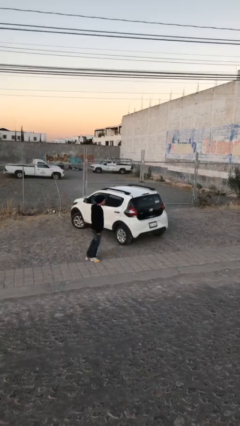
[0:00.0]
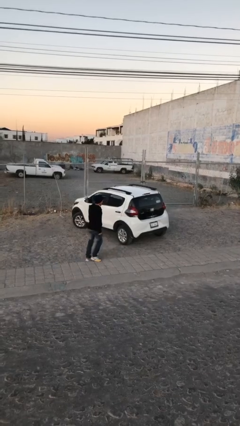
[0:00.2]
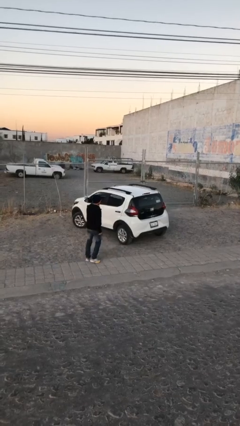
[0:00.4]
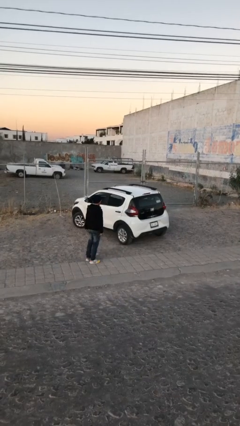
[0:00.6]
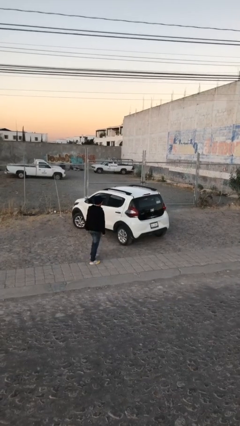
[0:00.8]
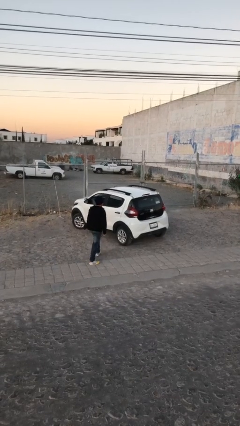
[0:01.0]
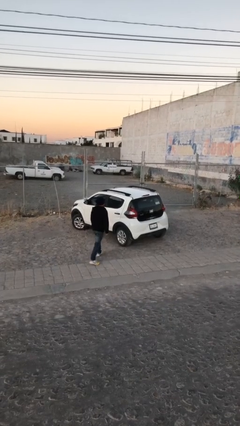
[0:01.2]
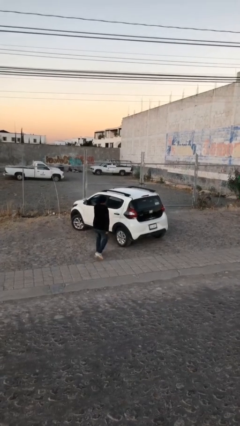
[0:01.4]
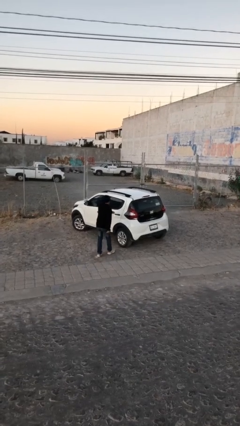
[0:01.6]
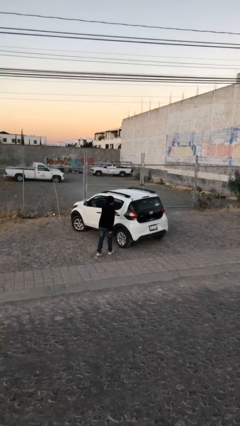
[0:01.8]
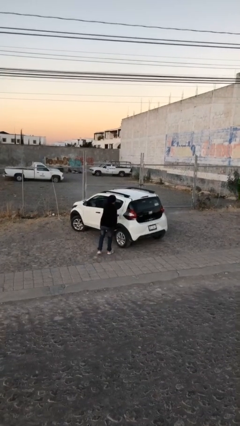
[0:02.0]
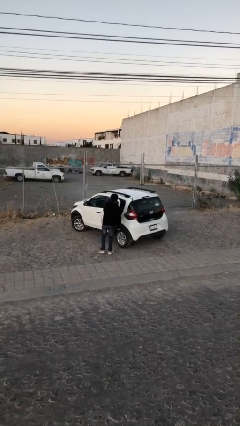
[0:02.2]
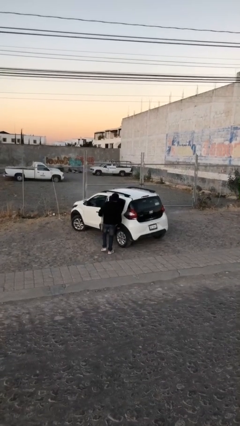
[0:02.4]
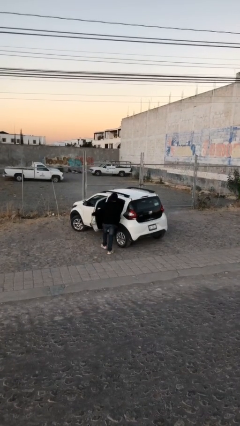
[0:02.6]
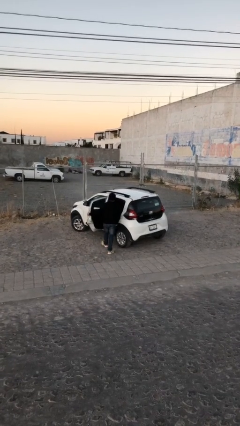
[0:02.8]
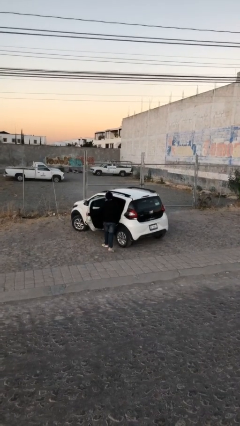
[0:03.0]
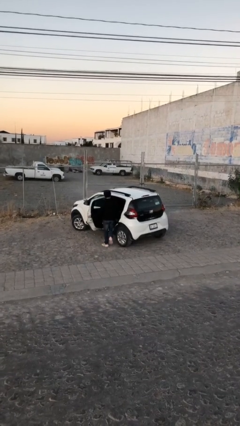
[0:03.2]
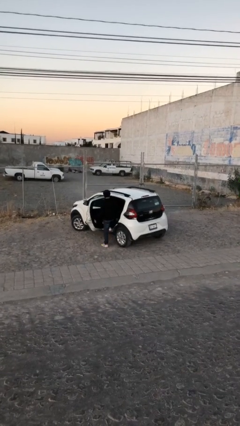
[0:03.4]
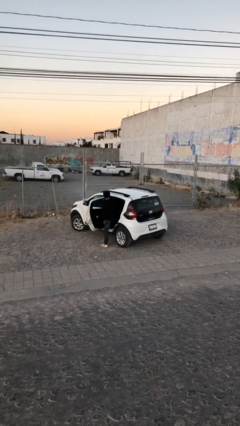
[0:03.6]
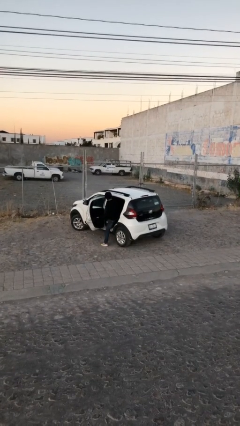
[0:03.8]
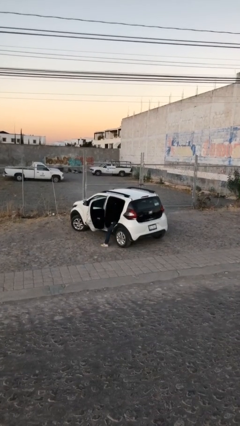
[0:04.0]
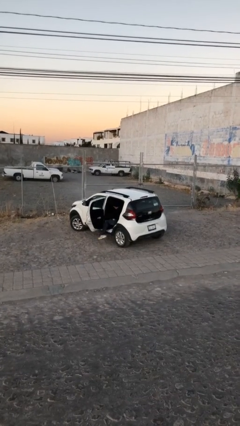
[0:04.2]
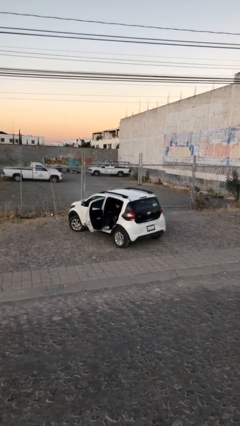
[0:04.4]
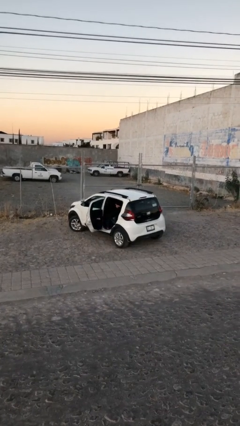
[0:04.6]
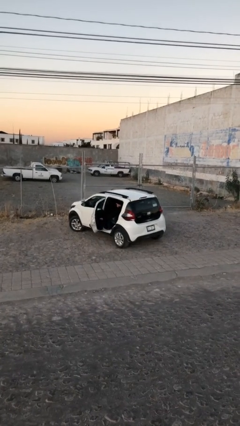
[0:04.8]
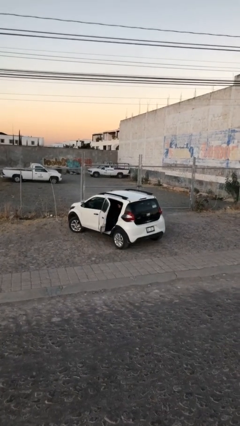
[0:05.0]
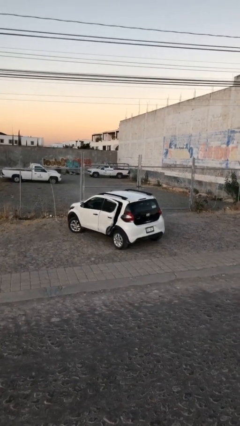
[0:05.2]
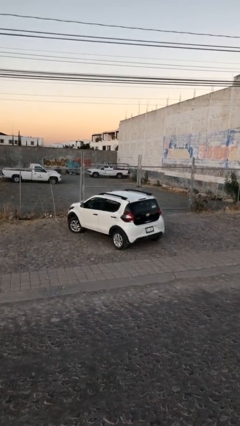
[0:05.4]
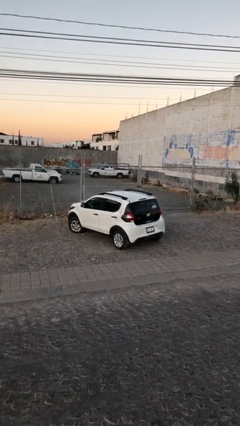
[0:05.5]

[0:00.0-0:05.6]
car picks up person

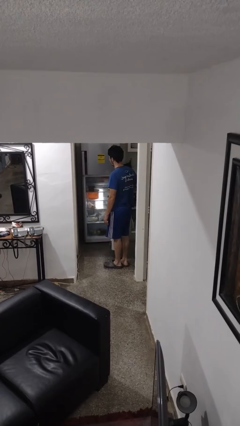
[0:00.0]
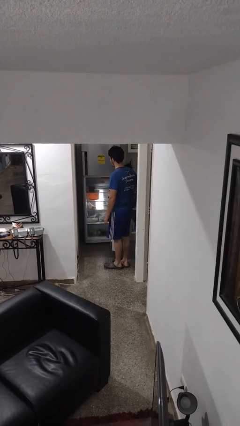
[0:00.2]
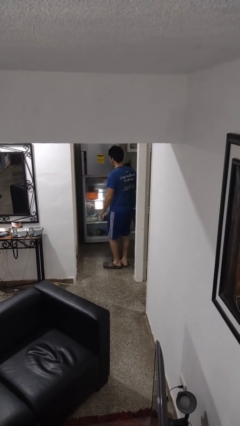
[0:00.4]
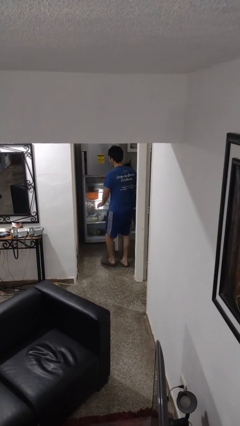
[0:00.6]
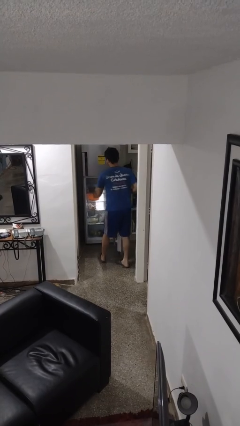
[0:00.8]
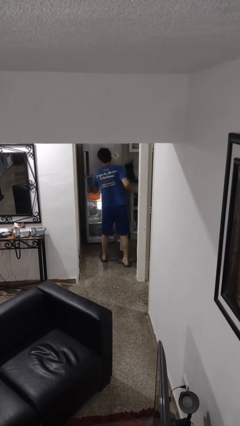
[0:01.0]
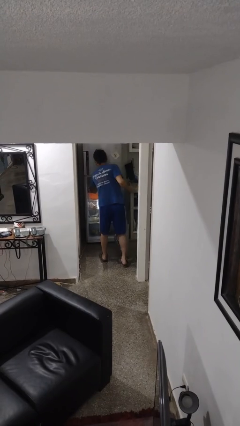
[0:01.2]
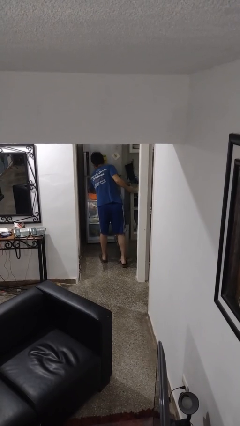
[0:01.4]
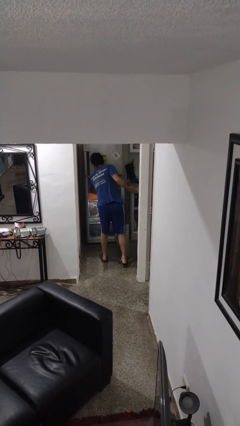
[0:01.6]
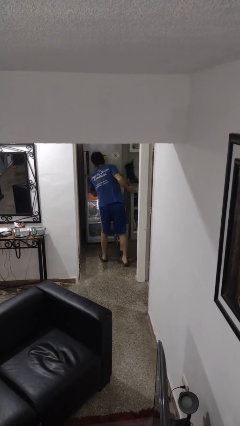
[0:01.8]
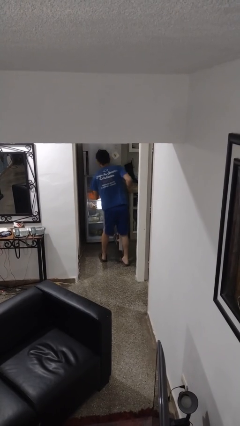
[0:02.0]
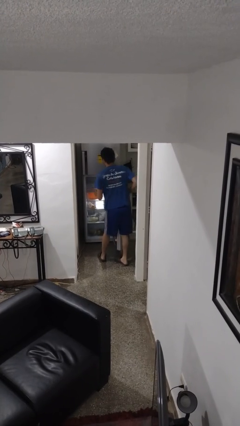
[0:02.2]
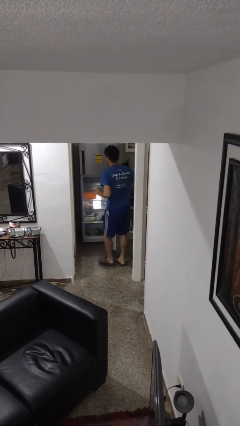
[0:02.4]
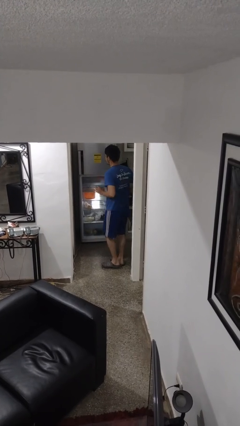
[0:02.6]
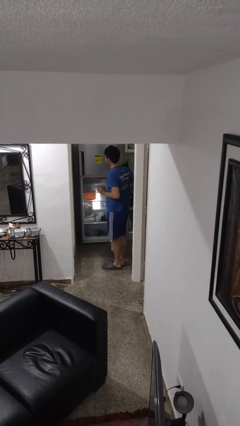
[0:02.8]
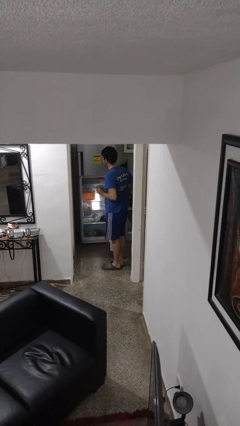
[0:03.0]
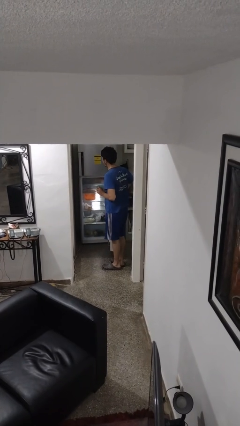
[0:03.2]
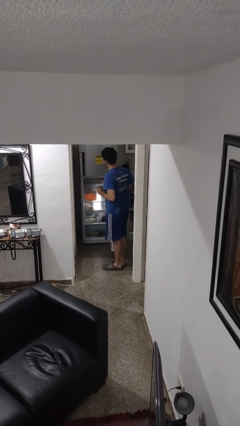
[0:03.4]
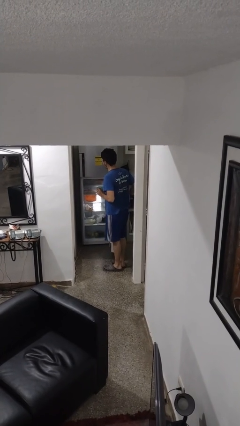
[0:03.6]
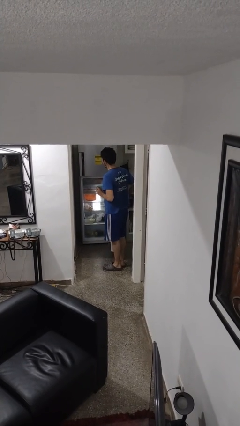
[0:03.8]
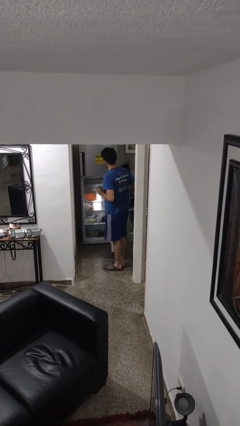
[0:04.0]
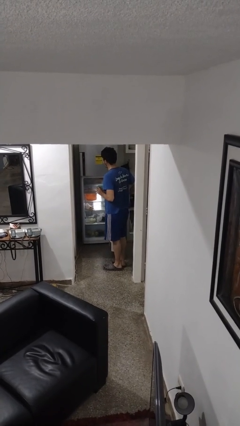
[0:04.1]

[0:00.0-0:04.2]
person takes object from refrigerator

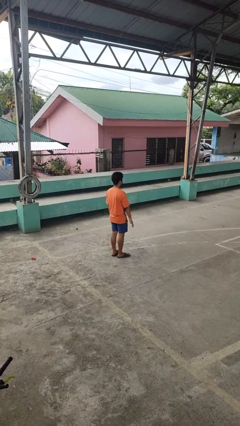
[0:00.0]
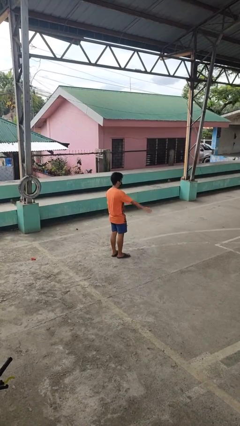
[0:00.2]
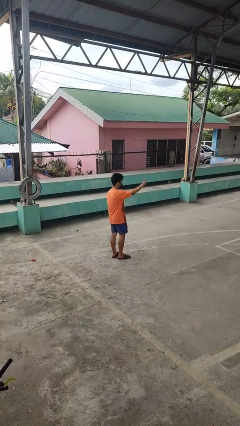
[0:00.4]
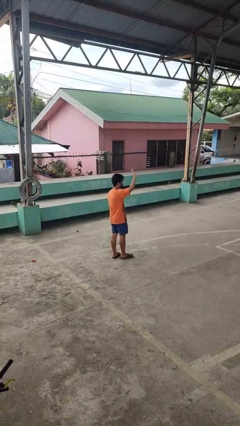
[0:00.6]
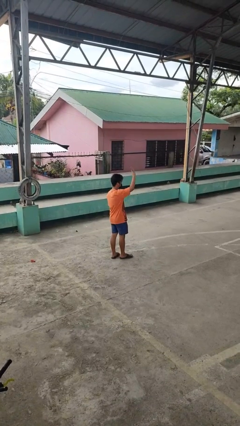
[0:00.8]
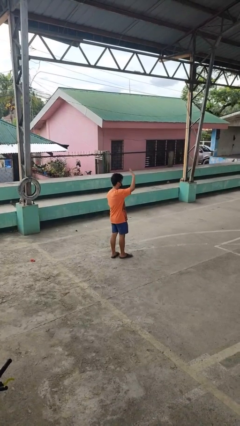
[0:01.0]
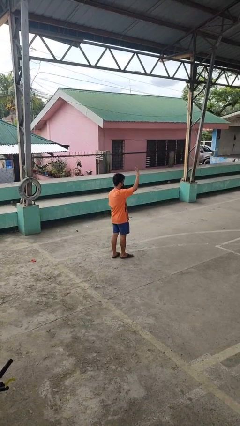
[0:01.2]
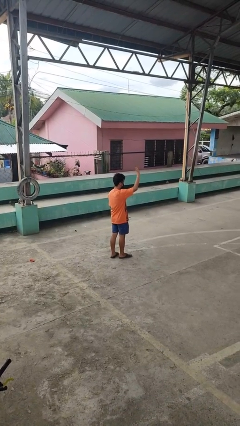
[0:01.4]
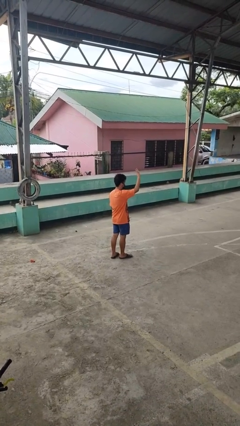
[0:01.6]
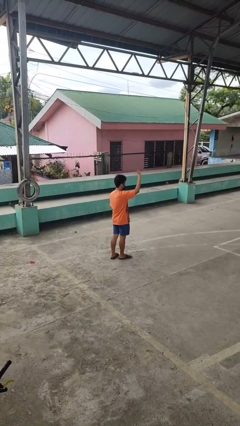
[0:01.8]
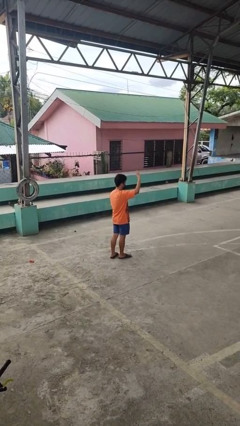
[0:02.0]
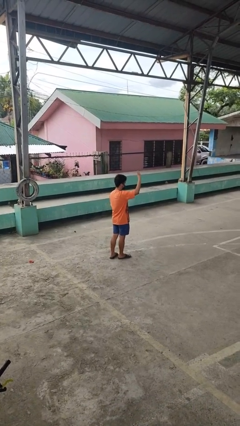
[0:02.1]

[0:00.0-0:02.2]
person waves at person

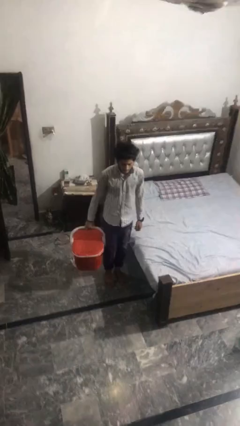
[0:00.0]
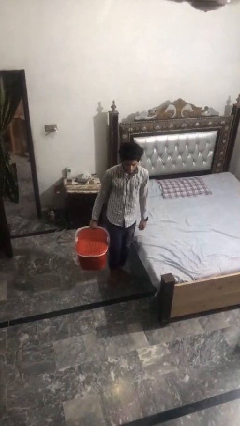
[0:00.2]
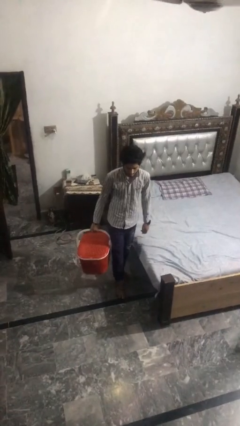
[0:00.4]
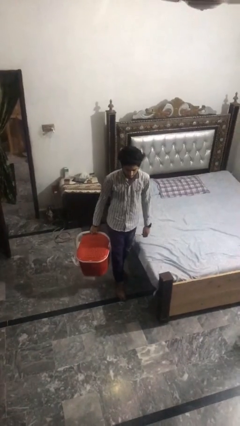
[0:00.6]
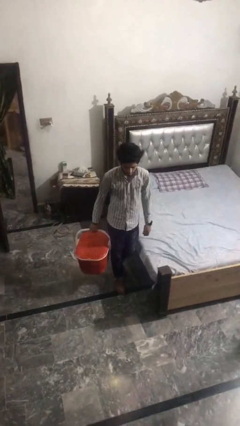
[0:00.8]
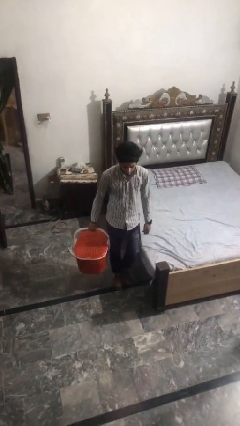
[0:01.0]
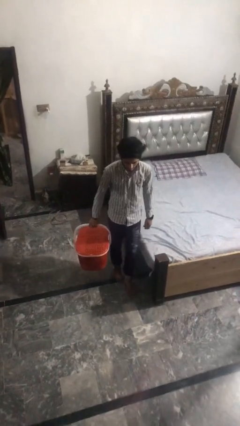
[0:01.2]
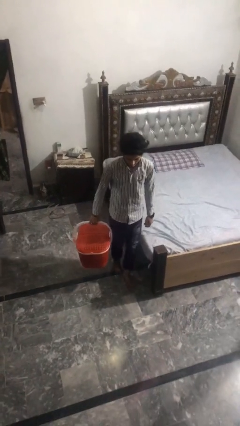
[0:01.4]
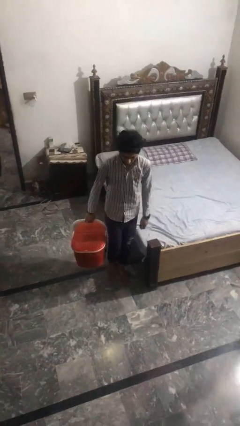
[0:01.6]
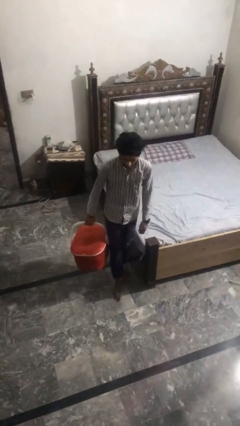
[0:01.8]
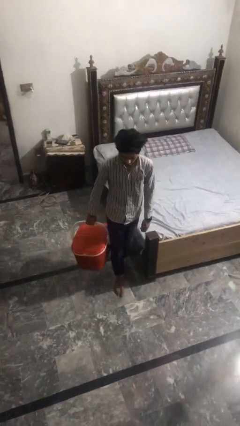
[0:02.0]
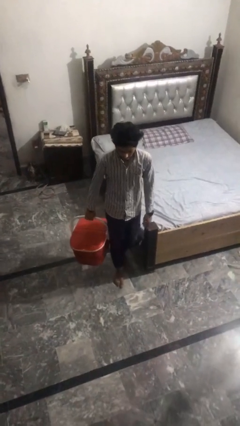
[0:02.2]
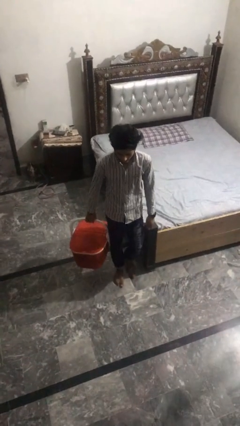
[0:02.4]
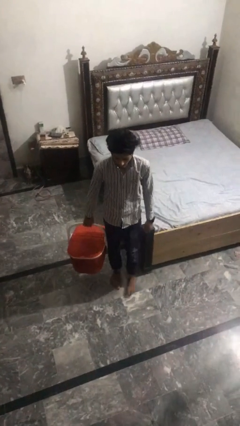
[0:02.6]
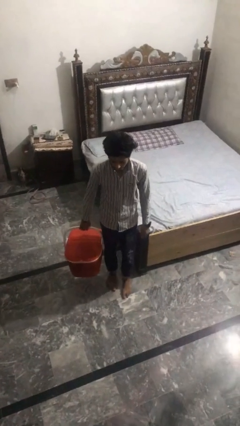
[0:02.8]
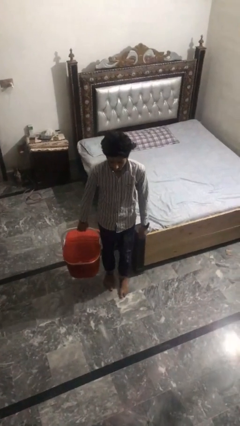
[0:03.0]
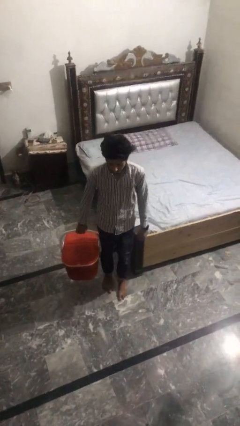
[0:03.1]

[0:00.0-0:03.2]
person carries laundry basket

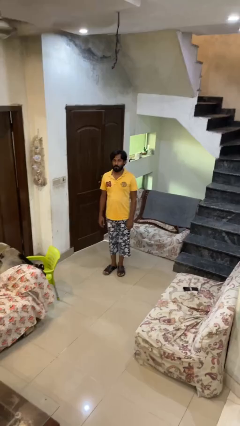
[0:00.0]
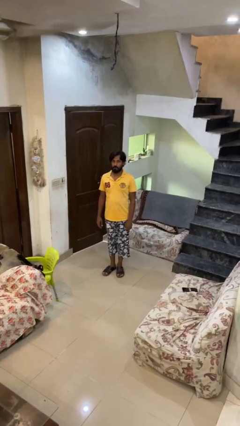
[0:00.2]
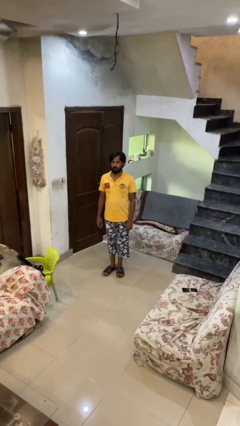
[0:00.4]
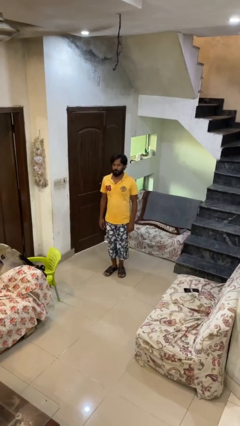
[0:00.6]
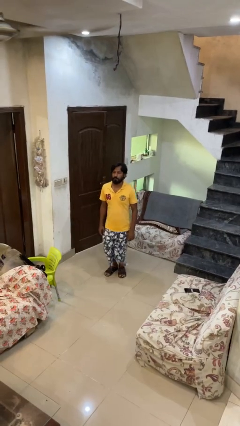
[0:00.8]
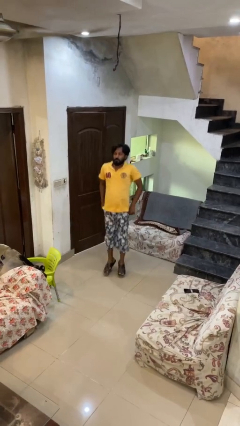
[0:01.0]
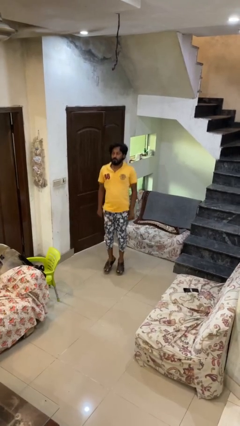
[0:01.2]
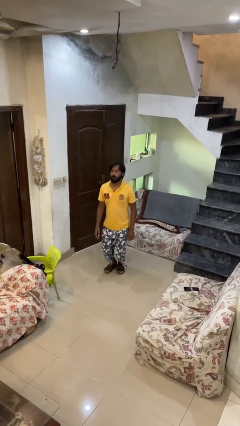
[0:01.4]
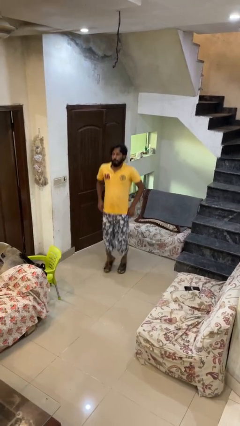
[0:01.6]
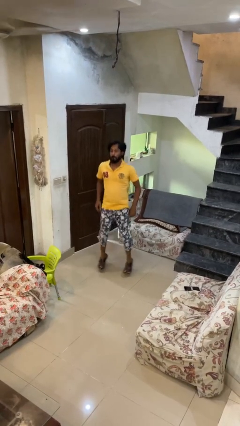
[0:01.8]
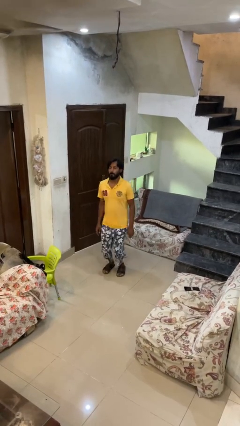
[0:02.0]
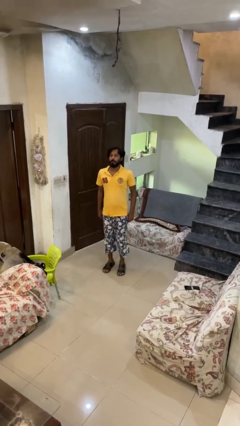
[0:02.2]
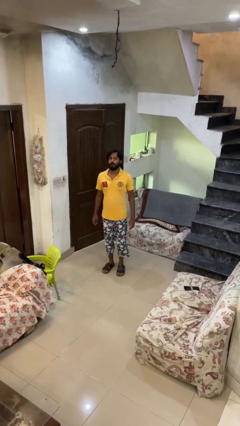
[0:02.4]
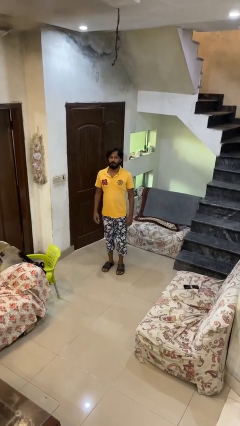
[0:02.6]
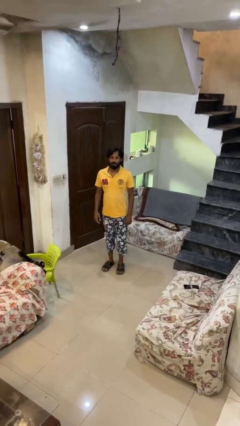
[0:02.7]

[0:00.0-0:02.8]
person jumps
